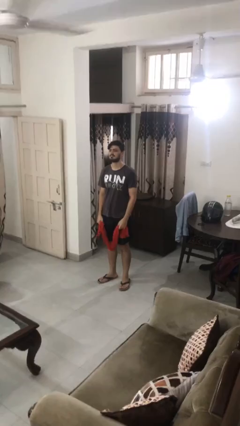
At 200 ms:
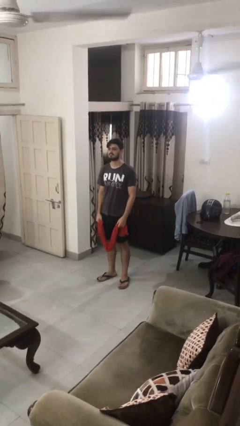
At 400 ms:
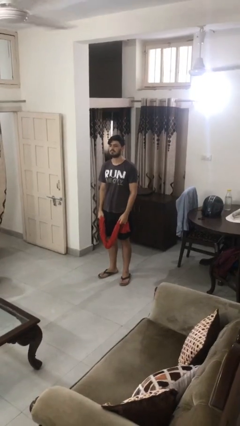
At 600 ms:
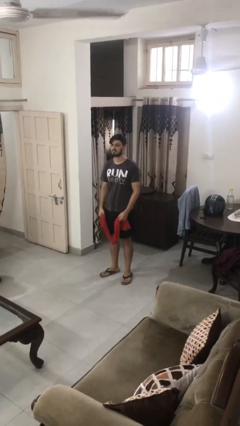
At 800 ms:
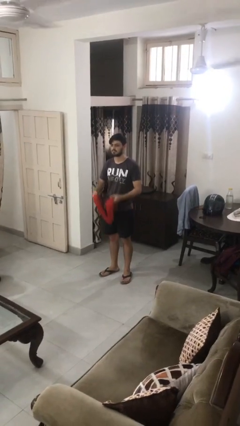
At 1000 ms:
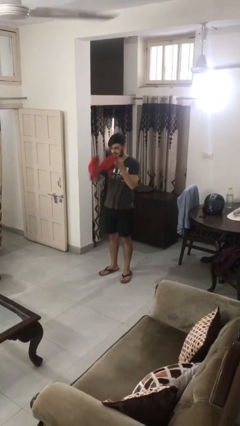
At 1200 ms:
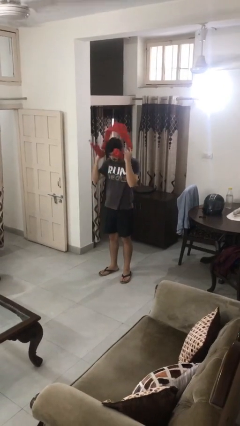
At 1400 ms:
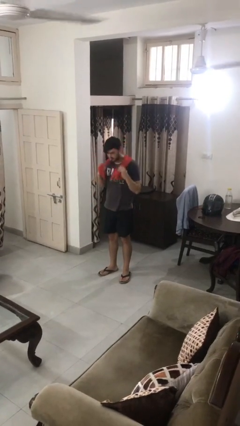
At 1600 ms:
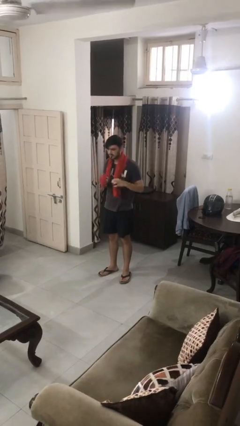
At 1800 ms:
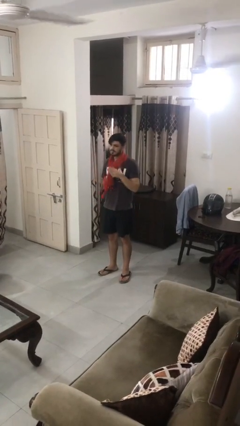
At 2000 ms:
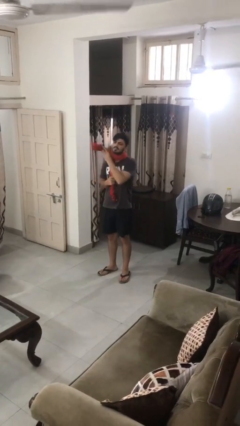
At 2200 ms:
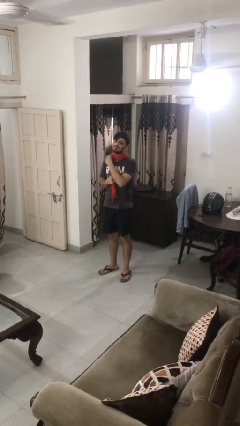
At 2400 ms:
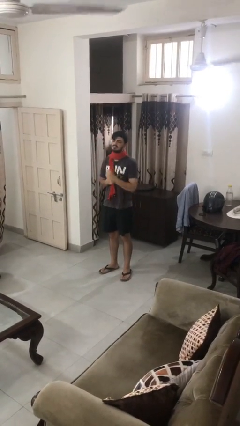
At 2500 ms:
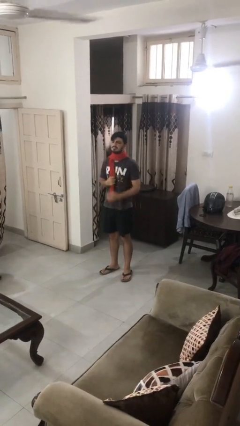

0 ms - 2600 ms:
person puts on scarf

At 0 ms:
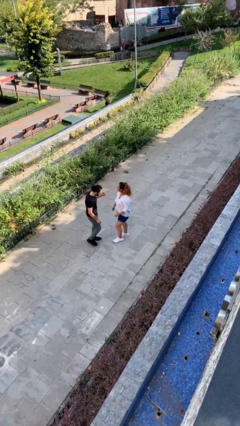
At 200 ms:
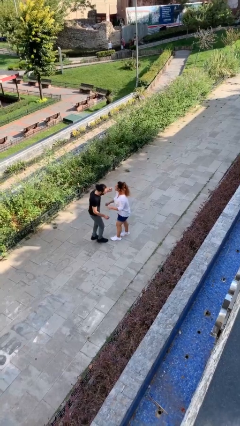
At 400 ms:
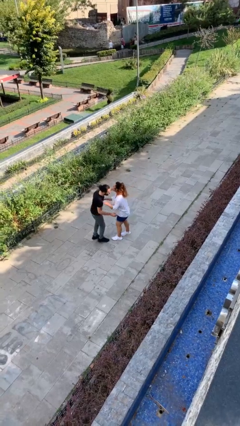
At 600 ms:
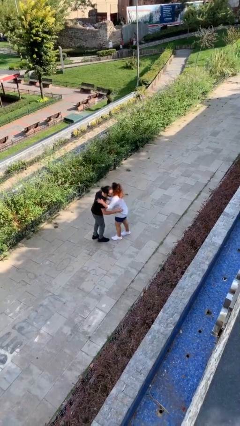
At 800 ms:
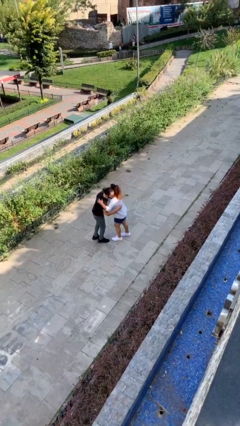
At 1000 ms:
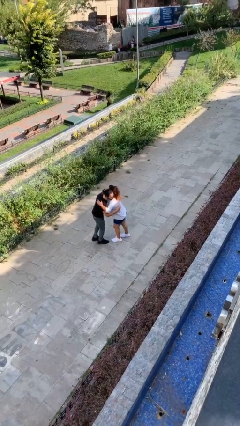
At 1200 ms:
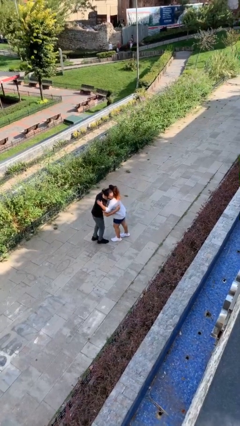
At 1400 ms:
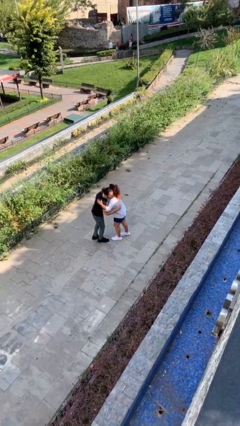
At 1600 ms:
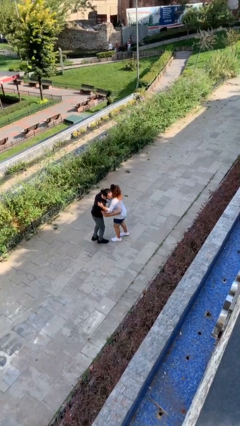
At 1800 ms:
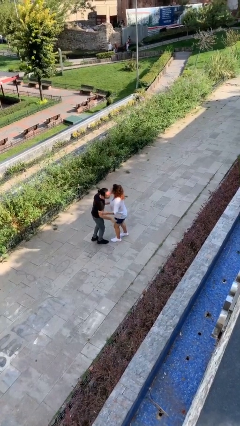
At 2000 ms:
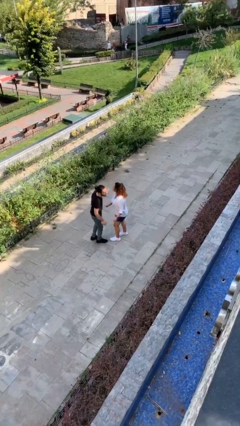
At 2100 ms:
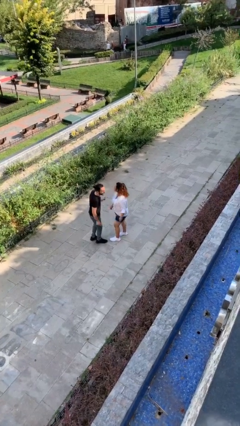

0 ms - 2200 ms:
person embraces person

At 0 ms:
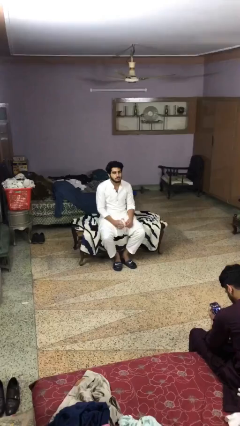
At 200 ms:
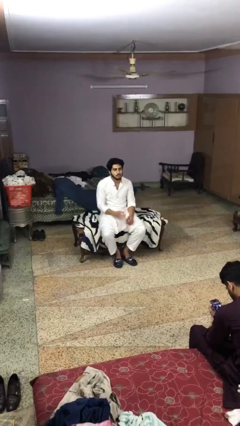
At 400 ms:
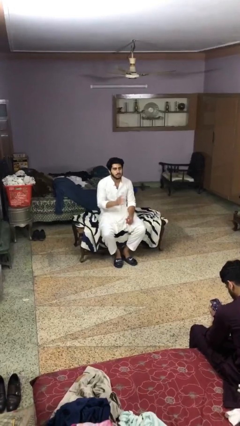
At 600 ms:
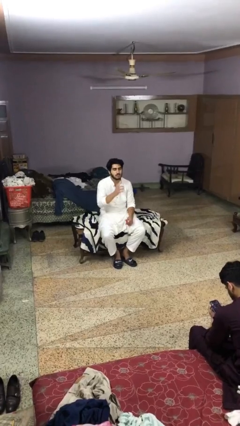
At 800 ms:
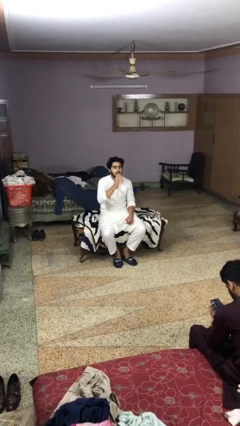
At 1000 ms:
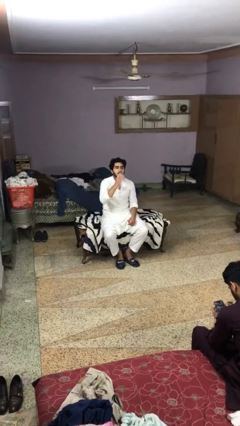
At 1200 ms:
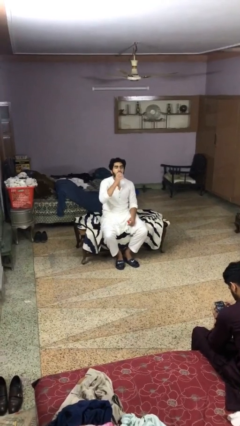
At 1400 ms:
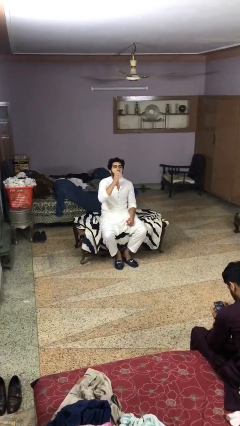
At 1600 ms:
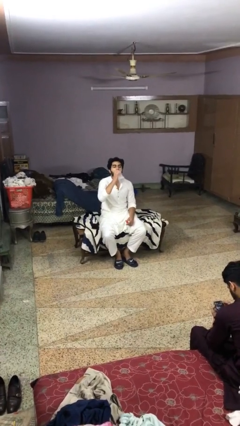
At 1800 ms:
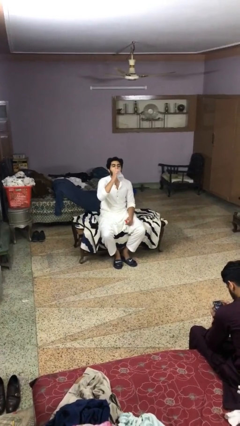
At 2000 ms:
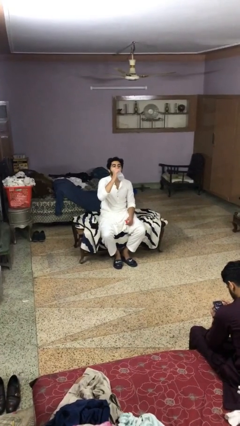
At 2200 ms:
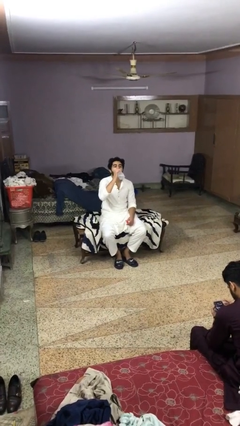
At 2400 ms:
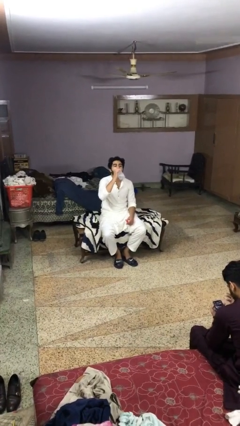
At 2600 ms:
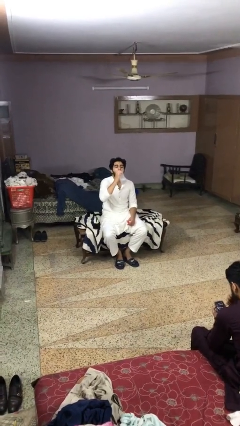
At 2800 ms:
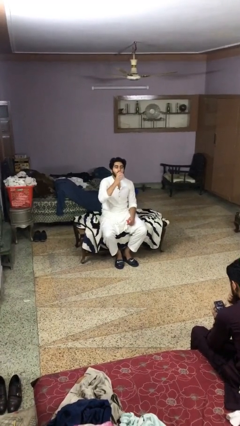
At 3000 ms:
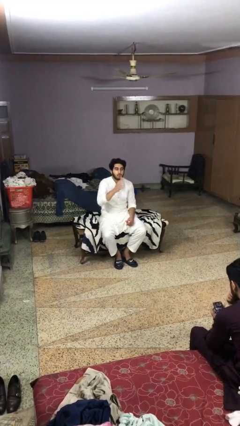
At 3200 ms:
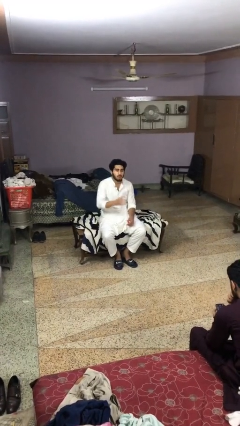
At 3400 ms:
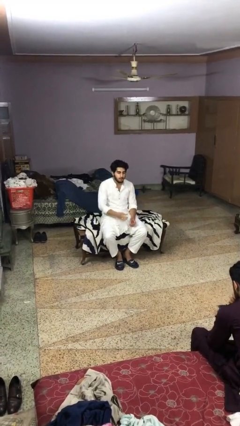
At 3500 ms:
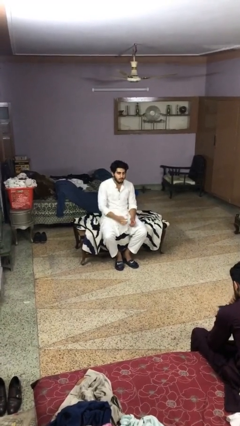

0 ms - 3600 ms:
person drinks from bottle

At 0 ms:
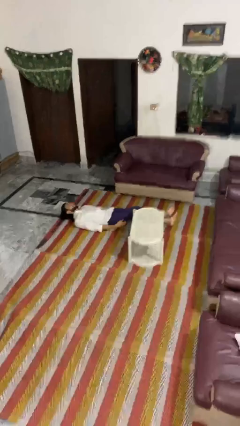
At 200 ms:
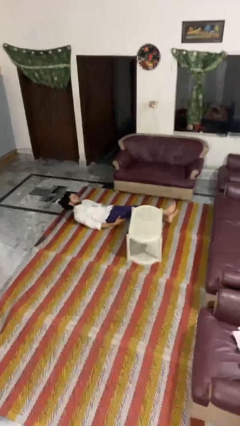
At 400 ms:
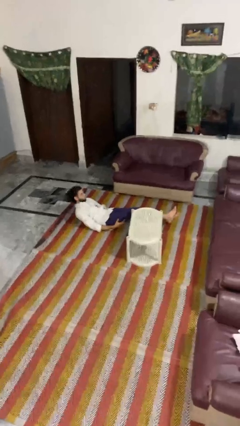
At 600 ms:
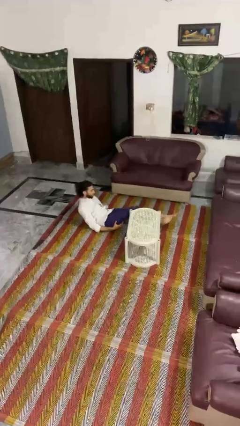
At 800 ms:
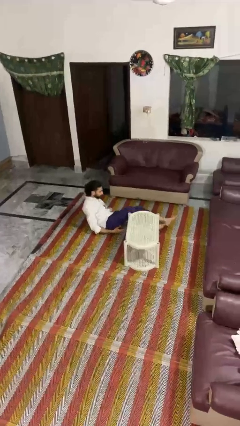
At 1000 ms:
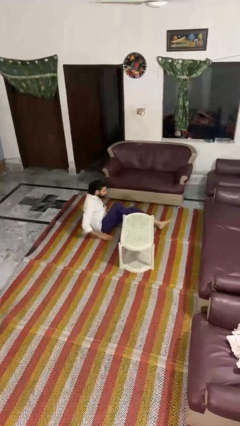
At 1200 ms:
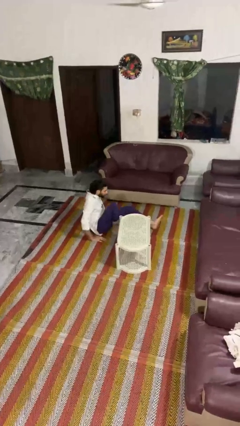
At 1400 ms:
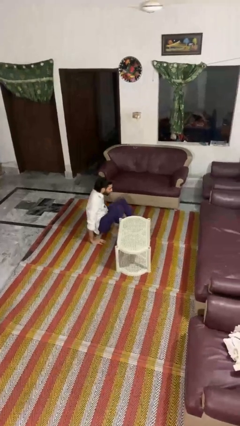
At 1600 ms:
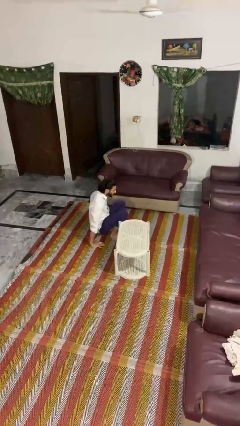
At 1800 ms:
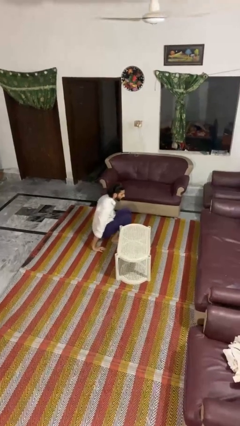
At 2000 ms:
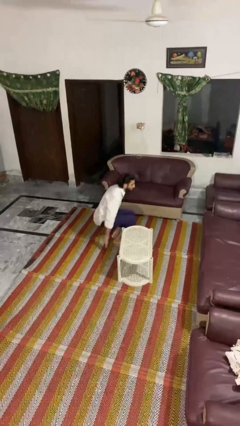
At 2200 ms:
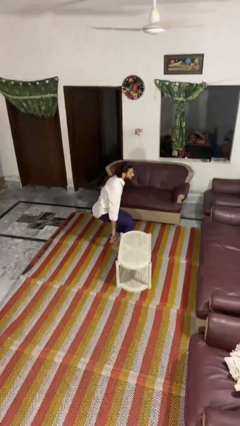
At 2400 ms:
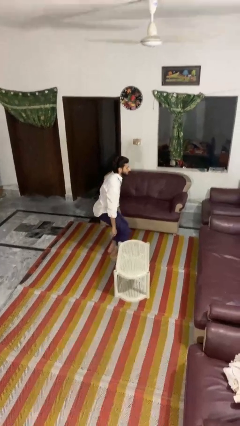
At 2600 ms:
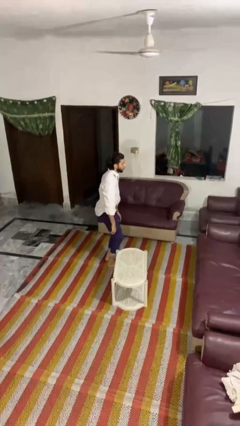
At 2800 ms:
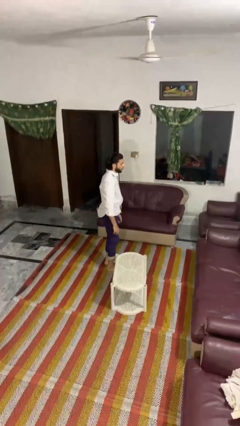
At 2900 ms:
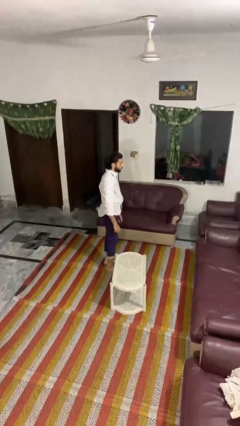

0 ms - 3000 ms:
person stands up from floor

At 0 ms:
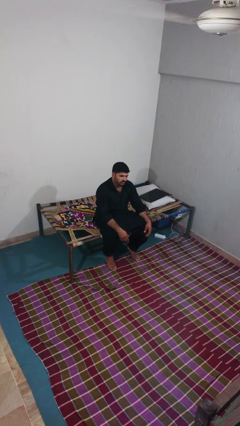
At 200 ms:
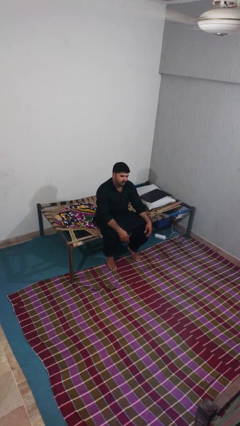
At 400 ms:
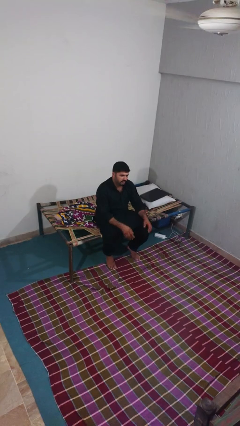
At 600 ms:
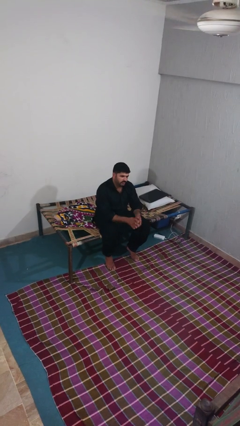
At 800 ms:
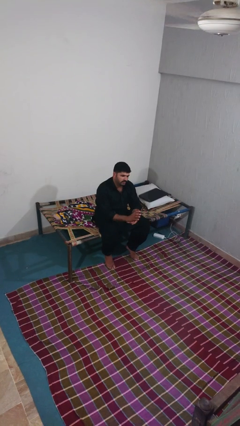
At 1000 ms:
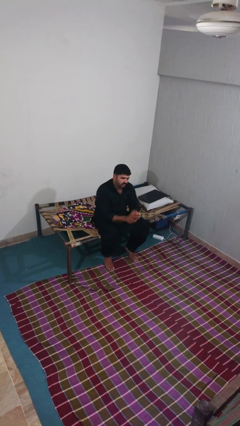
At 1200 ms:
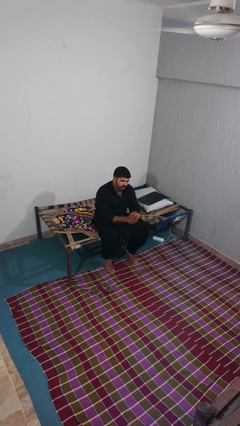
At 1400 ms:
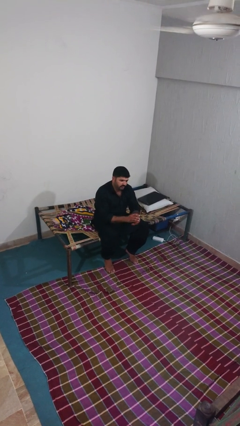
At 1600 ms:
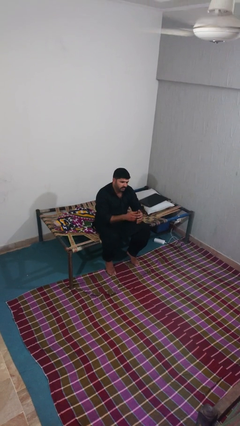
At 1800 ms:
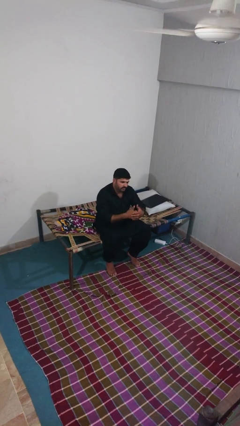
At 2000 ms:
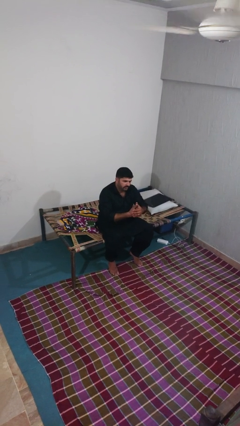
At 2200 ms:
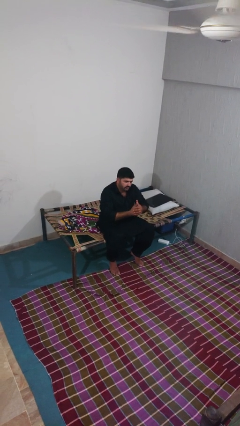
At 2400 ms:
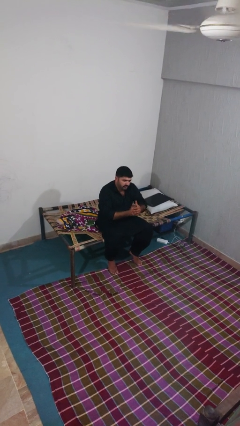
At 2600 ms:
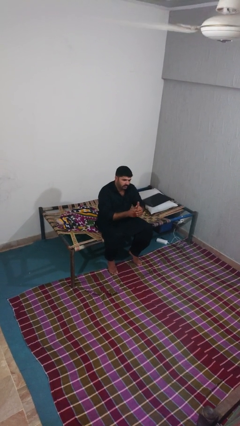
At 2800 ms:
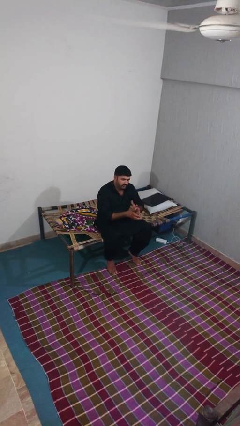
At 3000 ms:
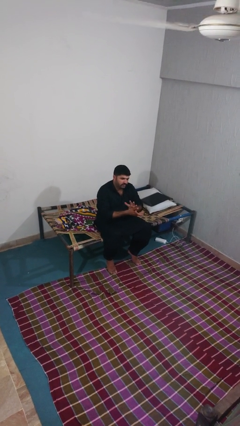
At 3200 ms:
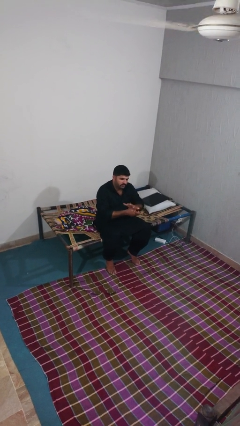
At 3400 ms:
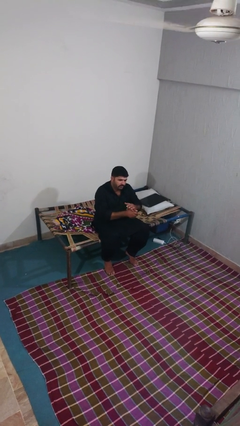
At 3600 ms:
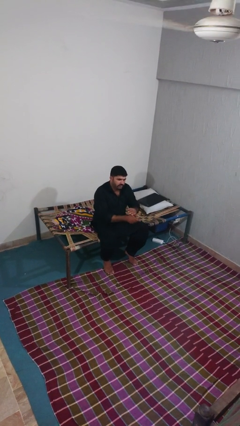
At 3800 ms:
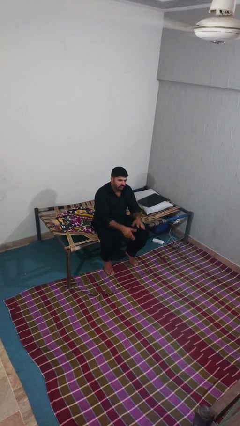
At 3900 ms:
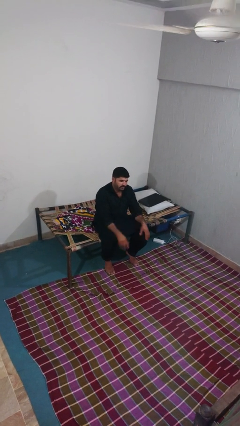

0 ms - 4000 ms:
person cracks knuckles

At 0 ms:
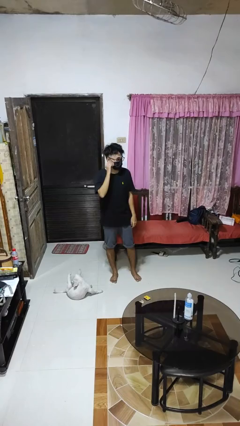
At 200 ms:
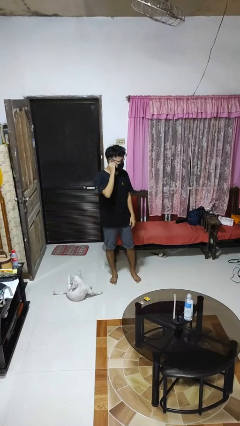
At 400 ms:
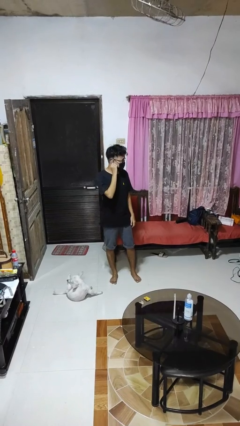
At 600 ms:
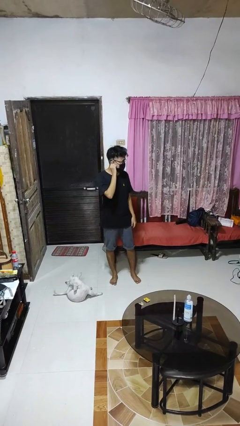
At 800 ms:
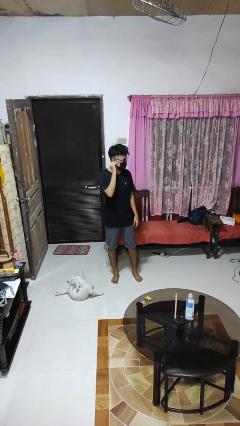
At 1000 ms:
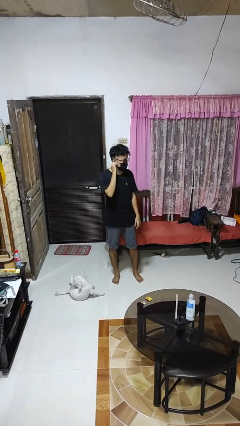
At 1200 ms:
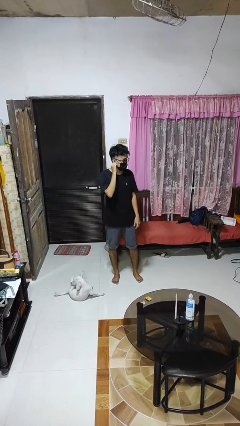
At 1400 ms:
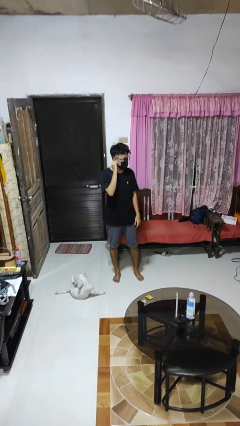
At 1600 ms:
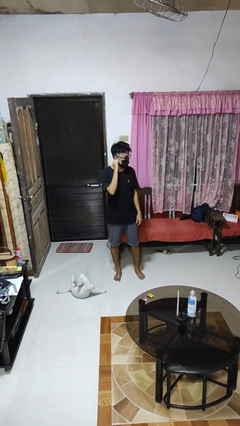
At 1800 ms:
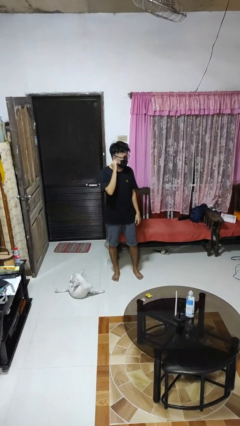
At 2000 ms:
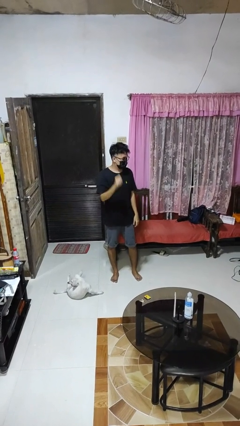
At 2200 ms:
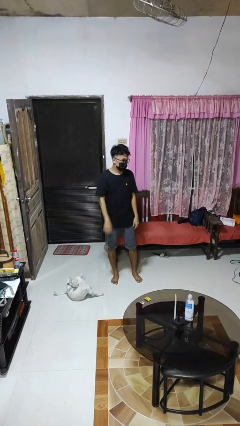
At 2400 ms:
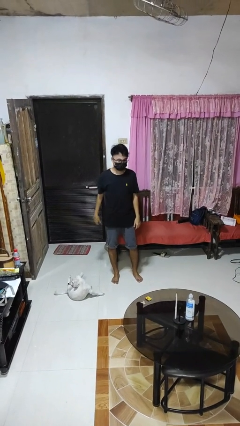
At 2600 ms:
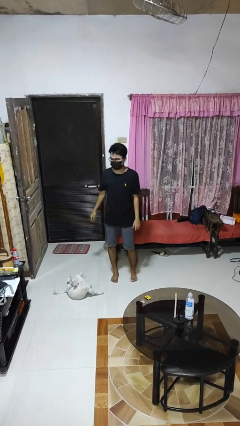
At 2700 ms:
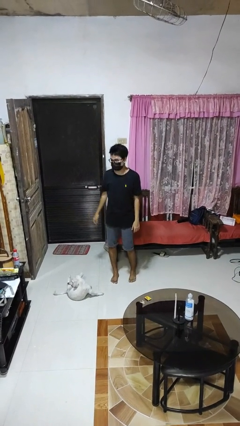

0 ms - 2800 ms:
person touches earlobe
